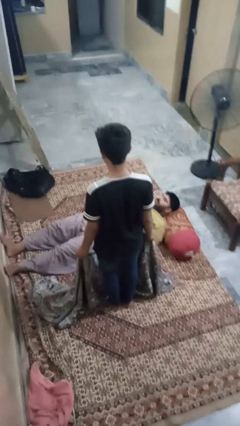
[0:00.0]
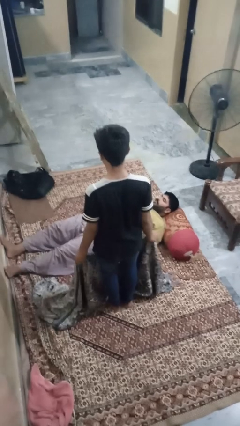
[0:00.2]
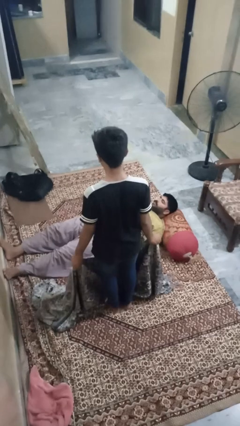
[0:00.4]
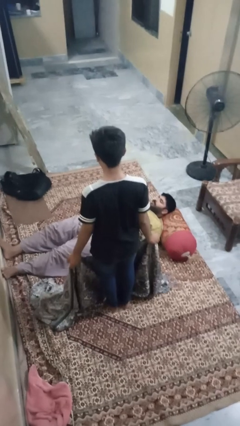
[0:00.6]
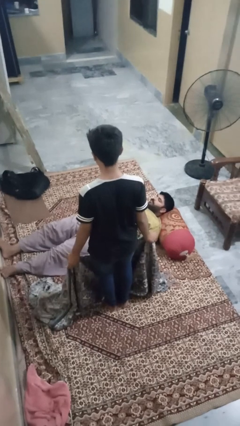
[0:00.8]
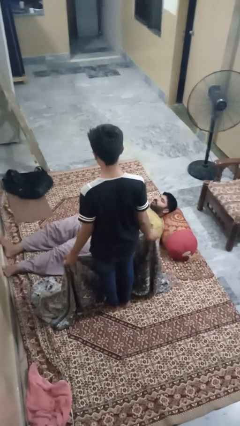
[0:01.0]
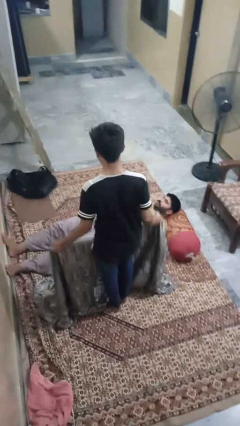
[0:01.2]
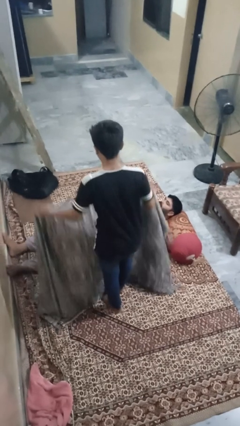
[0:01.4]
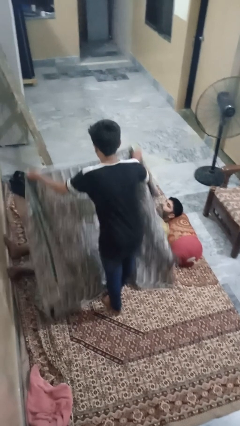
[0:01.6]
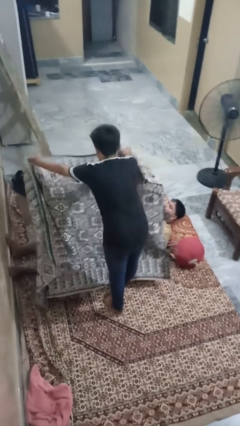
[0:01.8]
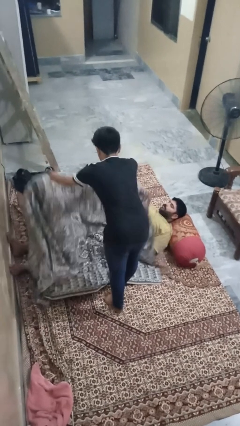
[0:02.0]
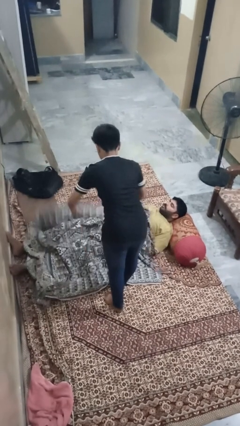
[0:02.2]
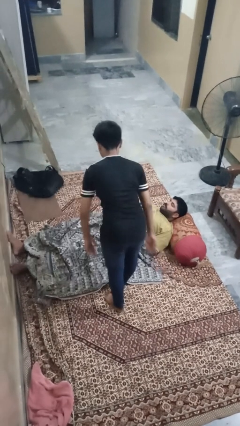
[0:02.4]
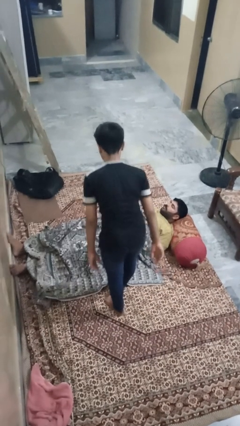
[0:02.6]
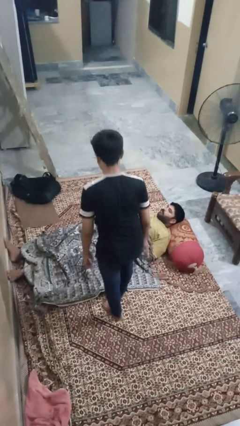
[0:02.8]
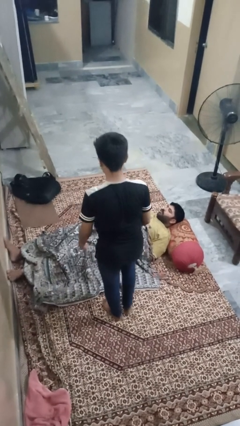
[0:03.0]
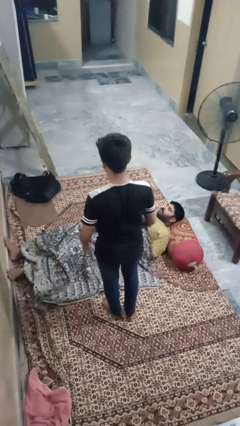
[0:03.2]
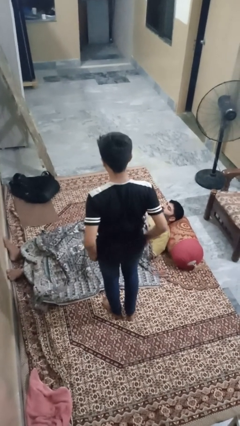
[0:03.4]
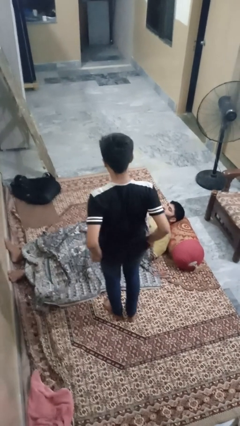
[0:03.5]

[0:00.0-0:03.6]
person covers friend with blanket

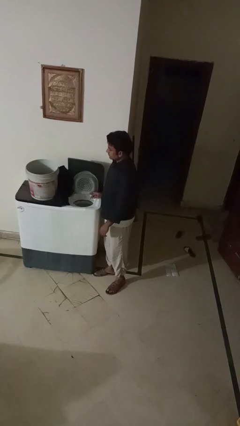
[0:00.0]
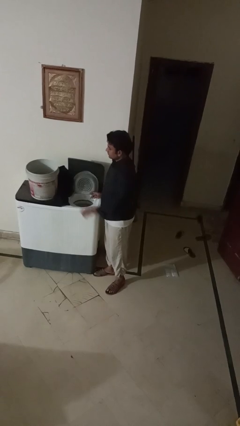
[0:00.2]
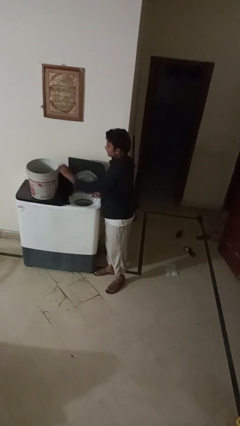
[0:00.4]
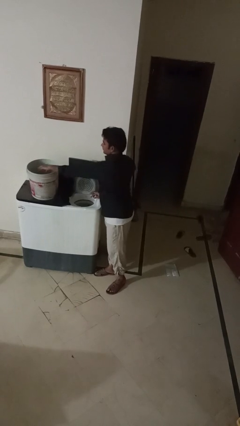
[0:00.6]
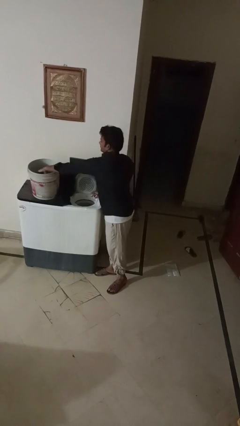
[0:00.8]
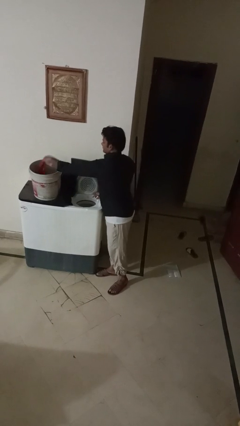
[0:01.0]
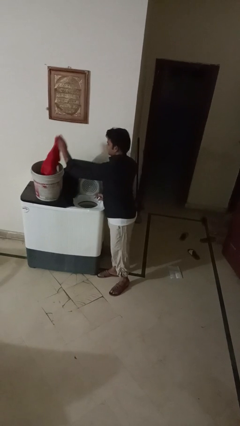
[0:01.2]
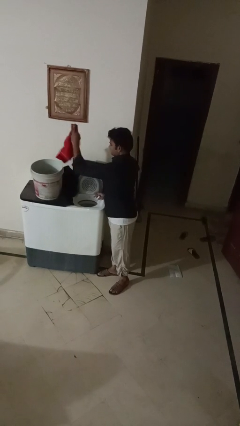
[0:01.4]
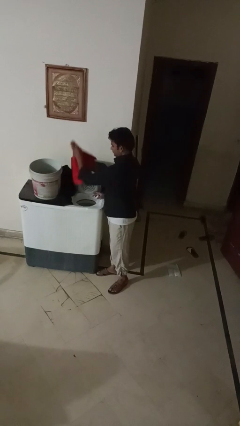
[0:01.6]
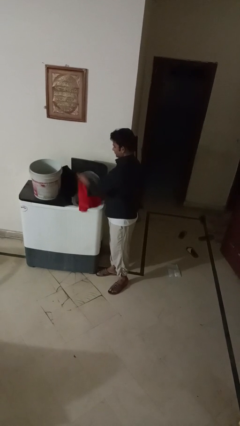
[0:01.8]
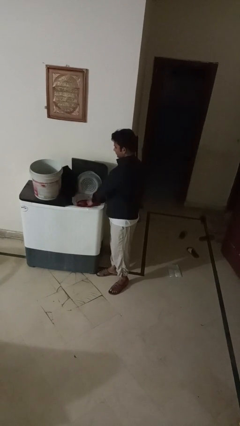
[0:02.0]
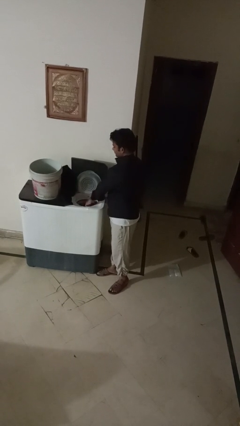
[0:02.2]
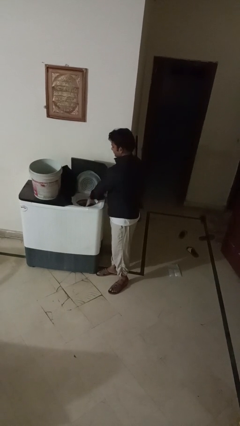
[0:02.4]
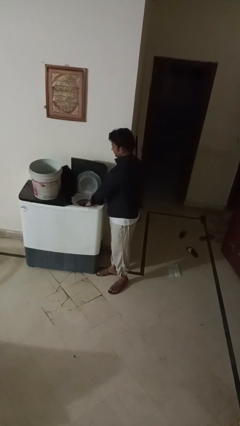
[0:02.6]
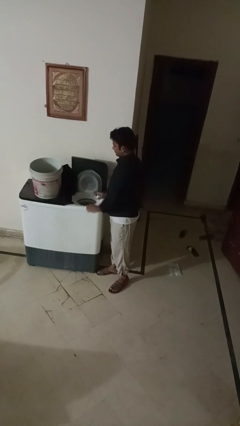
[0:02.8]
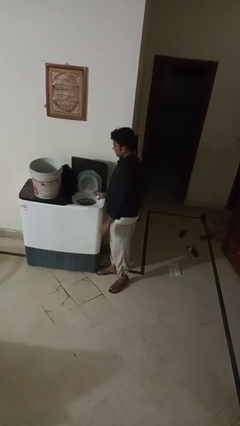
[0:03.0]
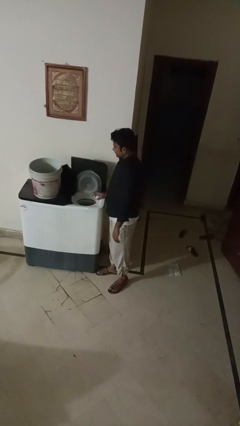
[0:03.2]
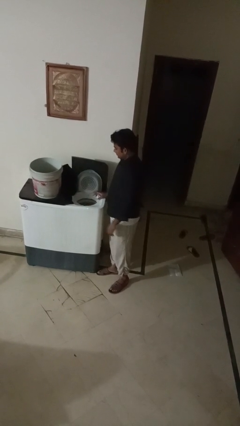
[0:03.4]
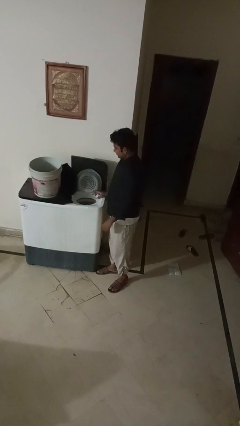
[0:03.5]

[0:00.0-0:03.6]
person loads dryer

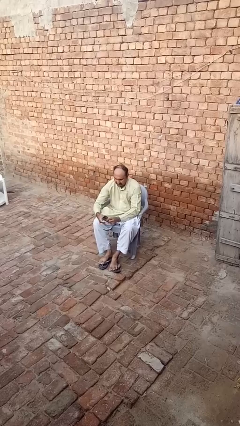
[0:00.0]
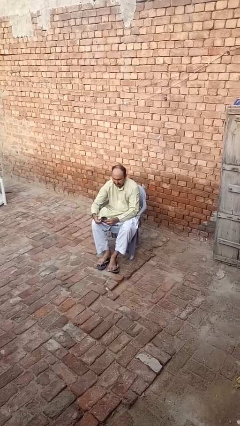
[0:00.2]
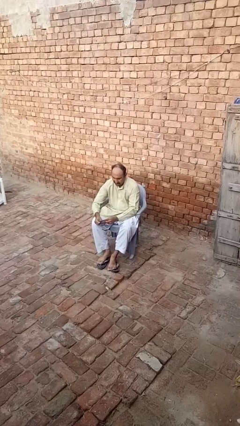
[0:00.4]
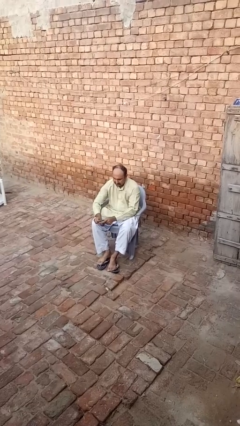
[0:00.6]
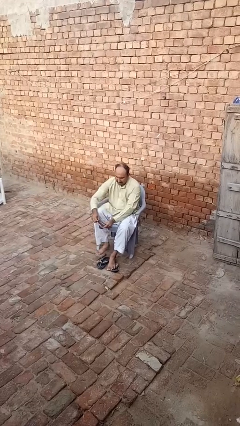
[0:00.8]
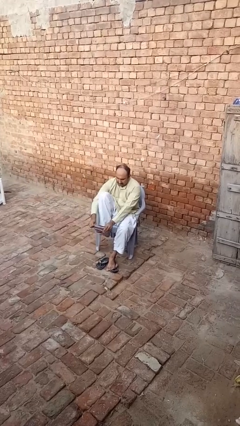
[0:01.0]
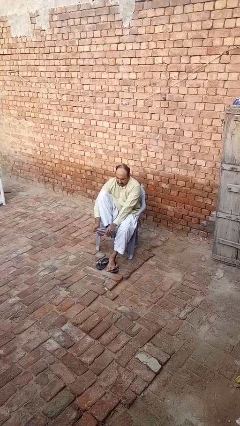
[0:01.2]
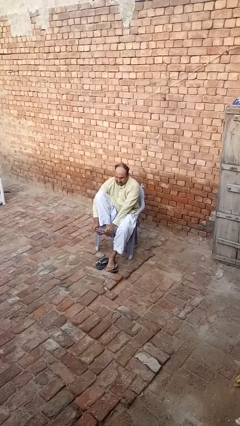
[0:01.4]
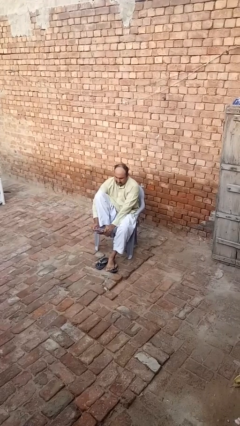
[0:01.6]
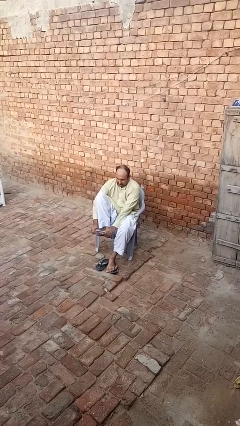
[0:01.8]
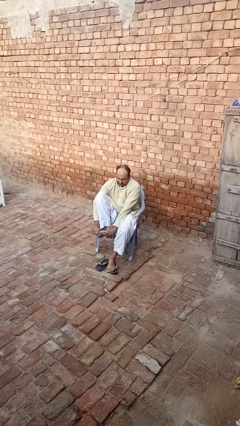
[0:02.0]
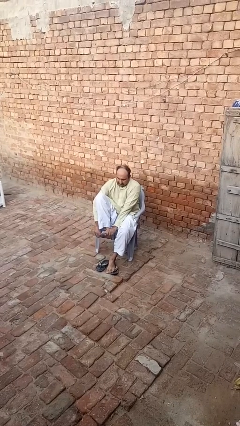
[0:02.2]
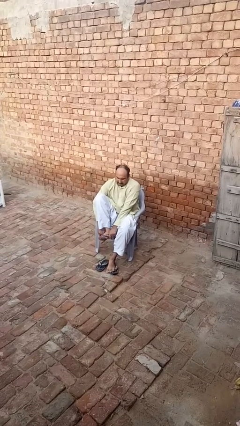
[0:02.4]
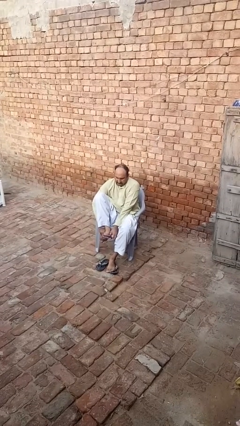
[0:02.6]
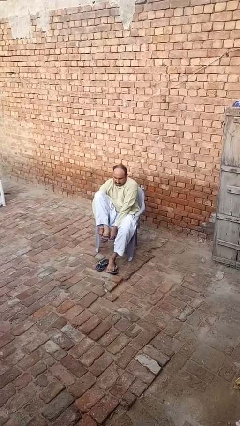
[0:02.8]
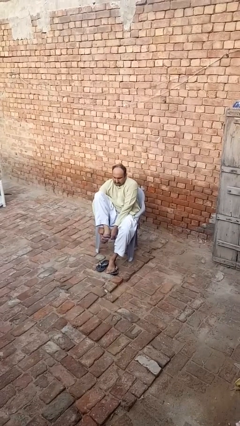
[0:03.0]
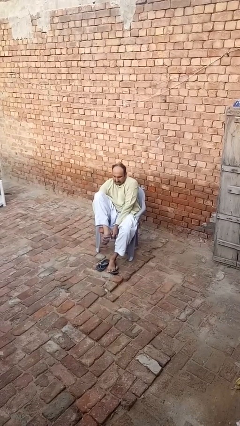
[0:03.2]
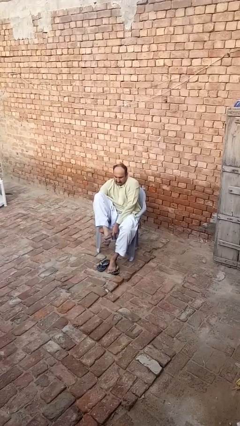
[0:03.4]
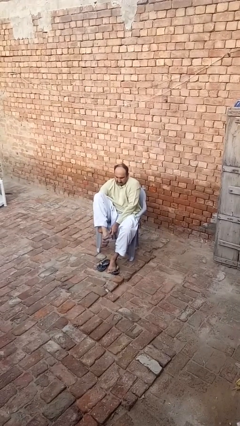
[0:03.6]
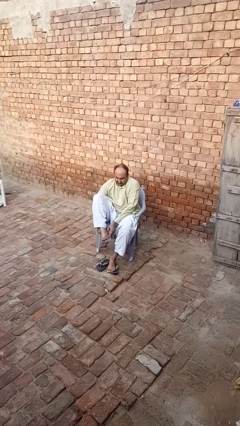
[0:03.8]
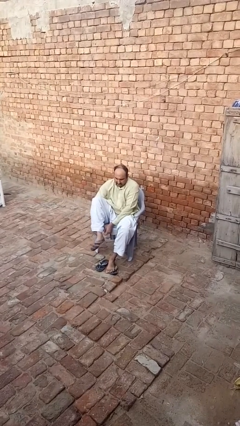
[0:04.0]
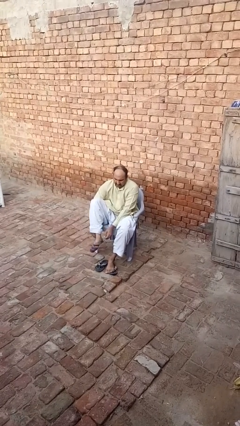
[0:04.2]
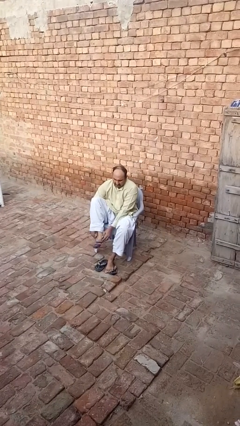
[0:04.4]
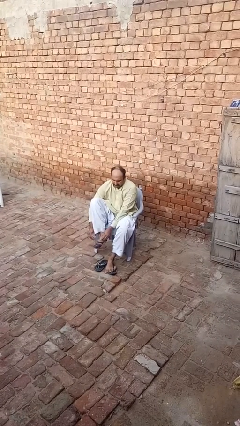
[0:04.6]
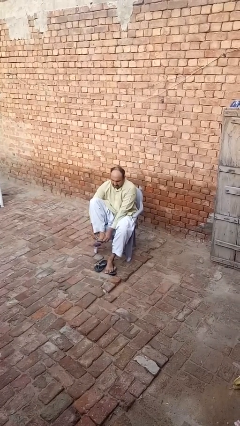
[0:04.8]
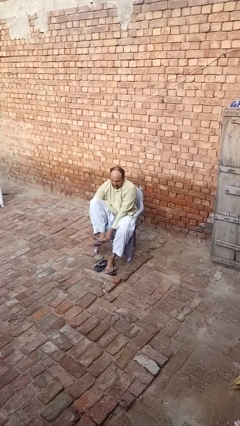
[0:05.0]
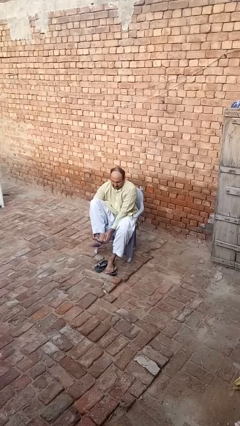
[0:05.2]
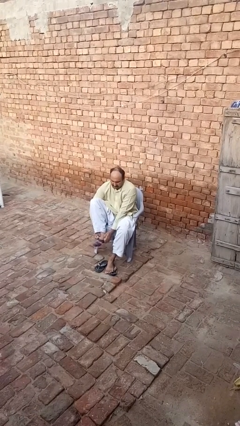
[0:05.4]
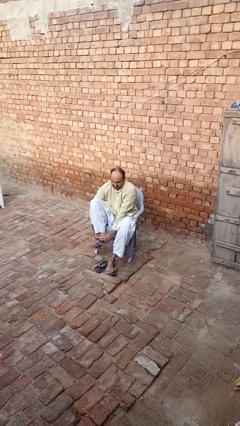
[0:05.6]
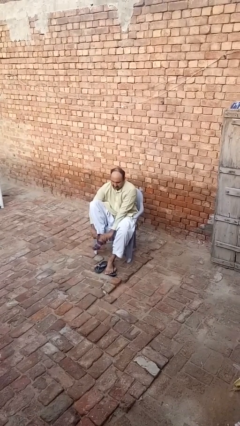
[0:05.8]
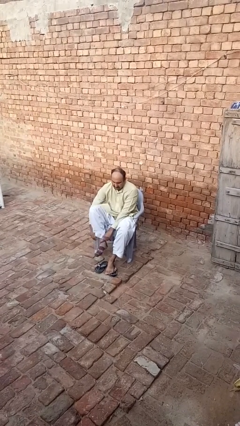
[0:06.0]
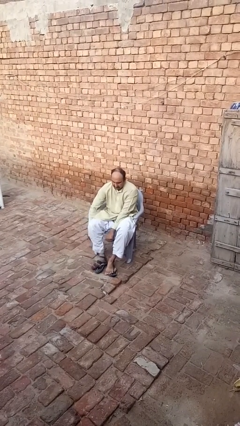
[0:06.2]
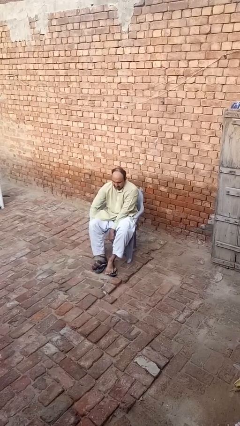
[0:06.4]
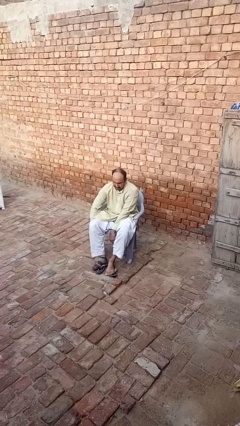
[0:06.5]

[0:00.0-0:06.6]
person puts on socks

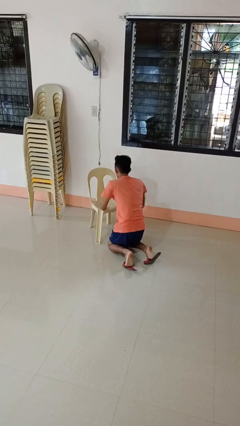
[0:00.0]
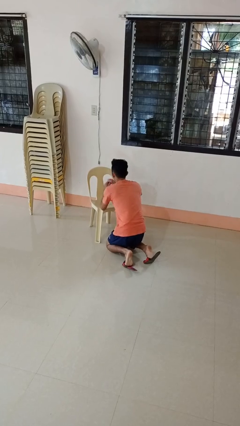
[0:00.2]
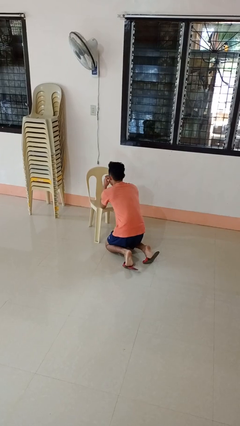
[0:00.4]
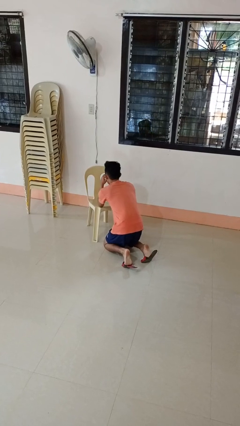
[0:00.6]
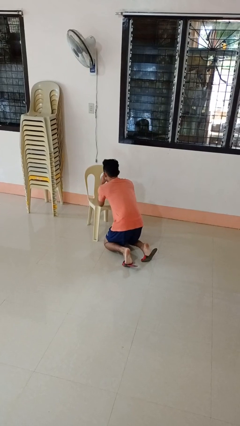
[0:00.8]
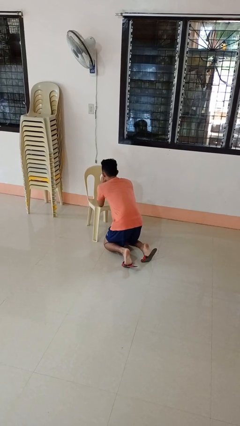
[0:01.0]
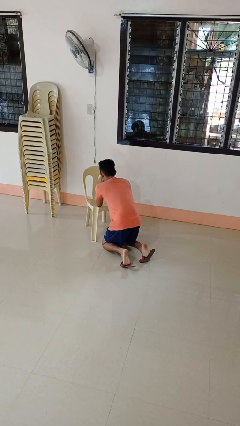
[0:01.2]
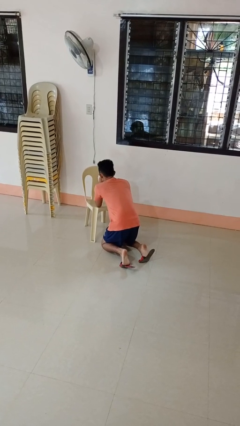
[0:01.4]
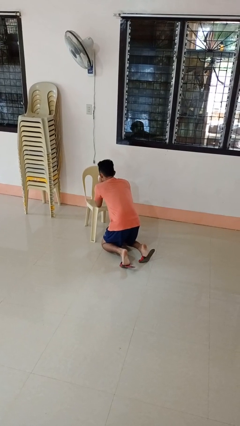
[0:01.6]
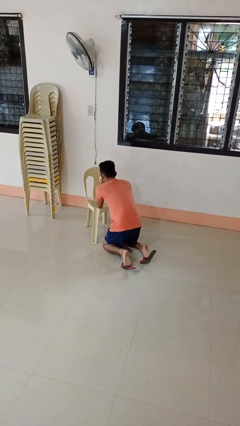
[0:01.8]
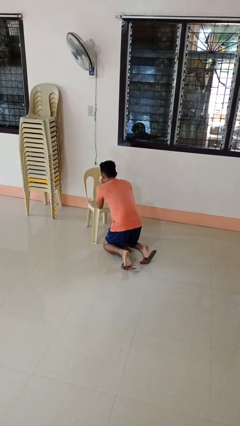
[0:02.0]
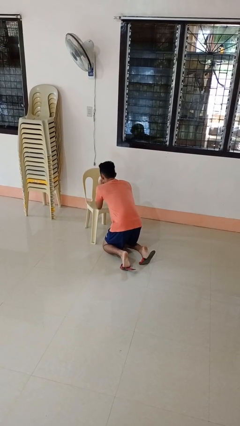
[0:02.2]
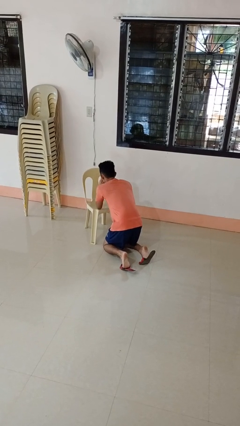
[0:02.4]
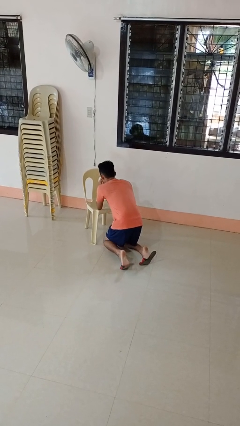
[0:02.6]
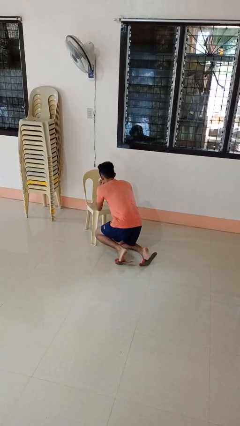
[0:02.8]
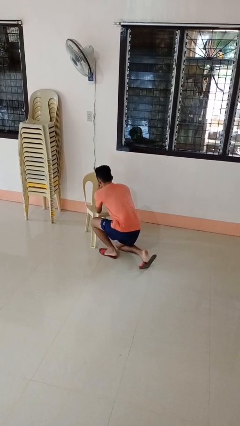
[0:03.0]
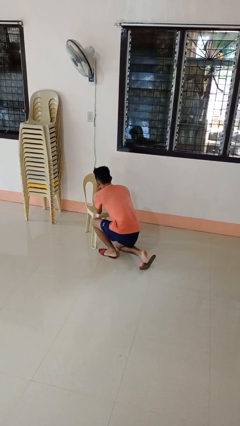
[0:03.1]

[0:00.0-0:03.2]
person prays

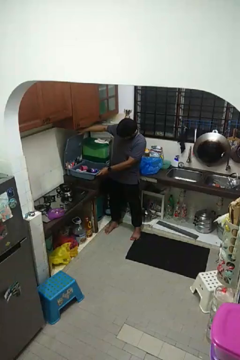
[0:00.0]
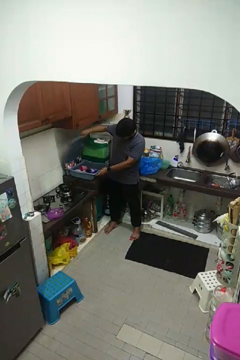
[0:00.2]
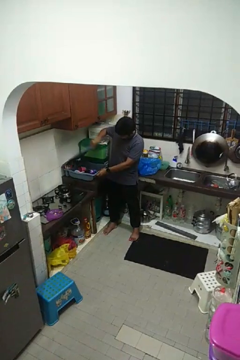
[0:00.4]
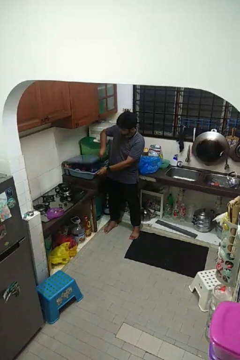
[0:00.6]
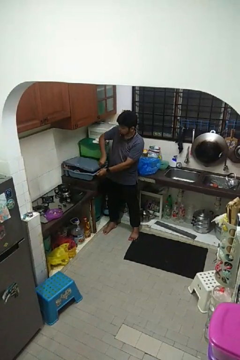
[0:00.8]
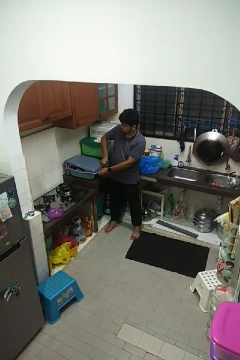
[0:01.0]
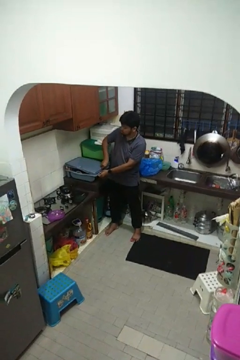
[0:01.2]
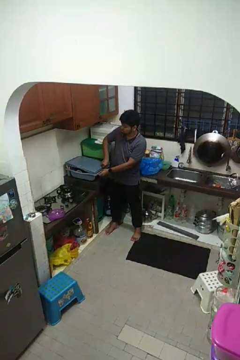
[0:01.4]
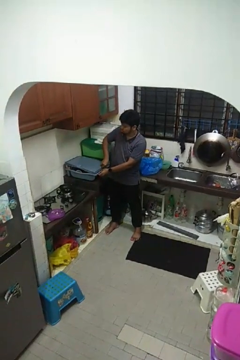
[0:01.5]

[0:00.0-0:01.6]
person closes dishwasher
